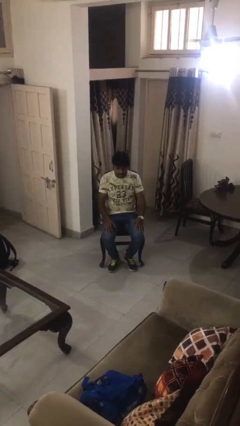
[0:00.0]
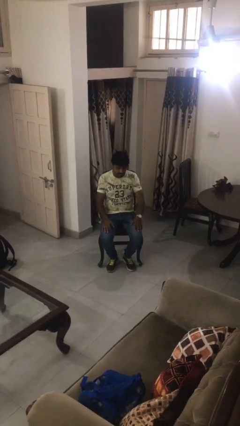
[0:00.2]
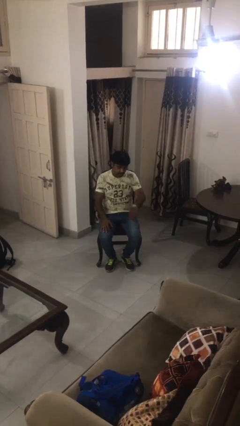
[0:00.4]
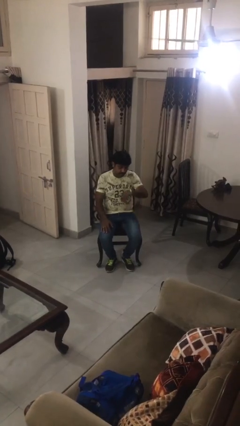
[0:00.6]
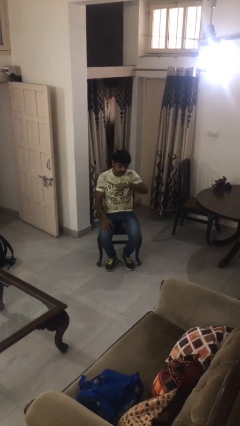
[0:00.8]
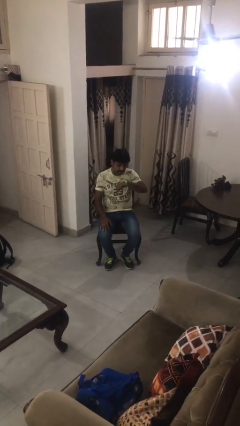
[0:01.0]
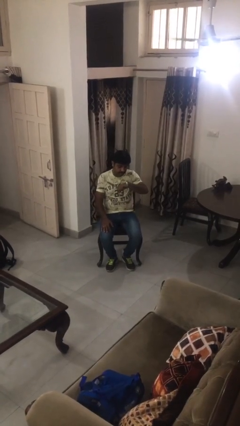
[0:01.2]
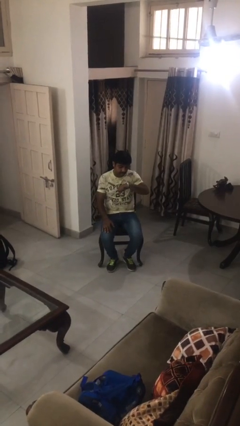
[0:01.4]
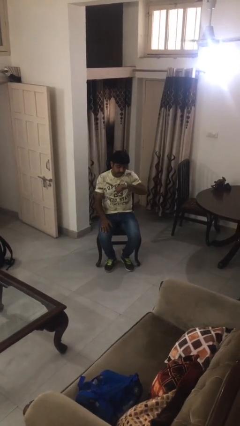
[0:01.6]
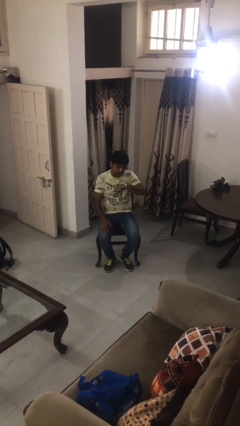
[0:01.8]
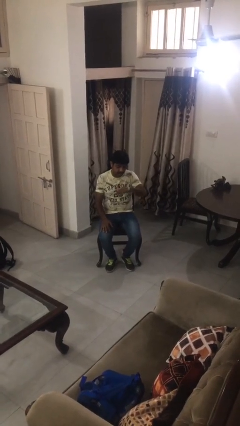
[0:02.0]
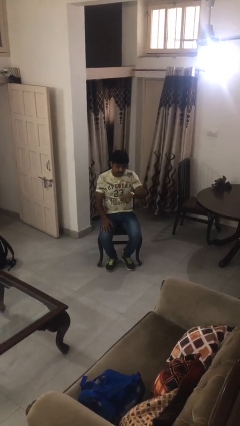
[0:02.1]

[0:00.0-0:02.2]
person looks at wristwatch

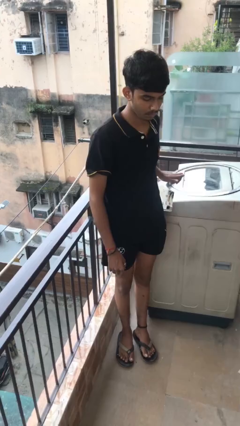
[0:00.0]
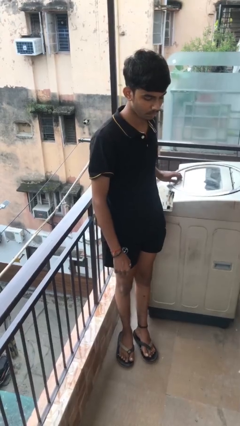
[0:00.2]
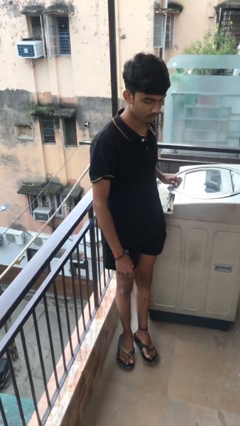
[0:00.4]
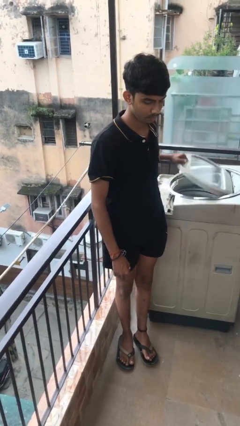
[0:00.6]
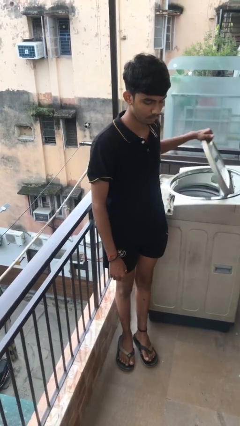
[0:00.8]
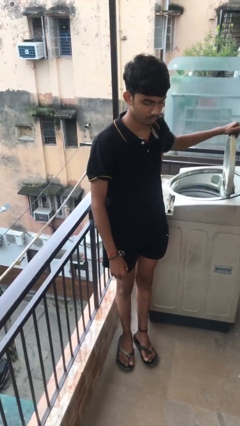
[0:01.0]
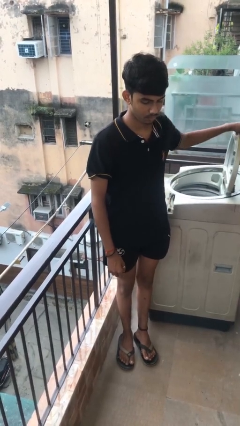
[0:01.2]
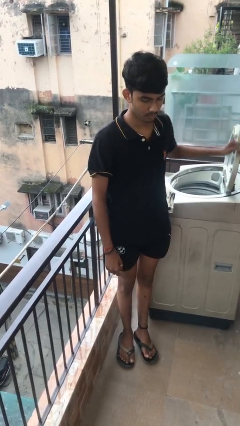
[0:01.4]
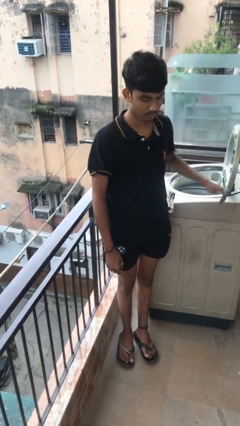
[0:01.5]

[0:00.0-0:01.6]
person opens clothes washer

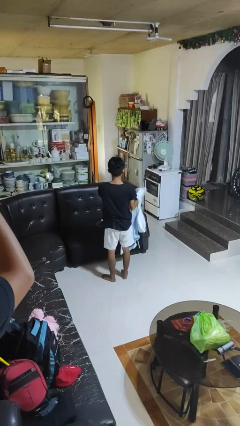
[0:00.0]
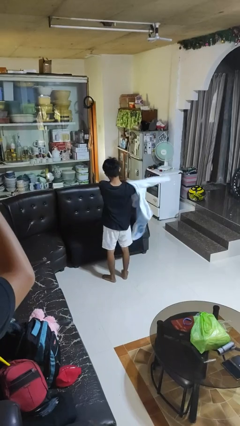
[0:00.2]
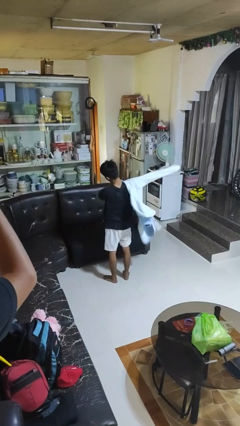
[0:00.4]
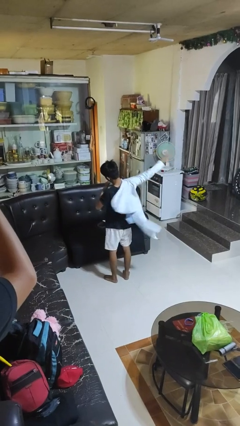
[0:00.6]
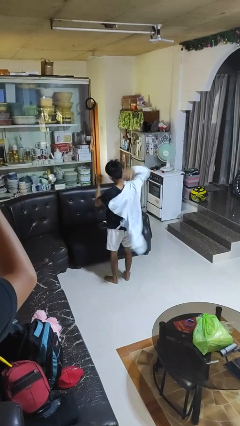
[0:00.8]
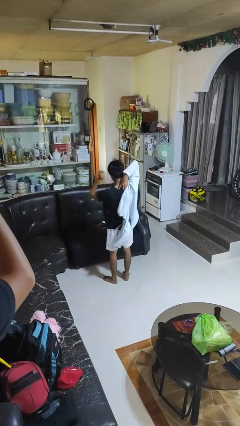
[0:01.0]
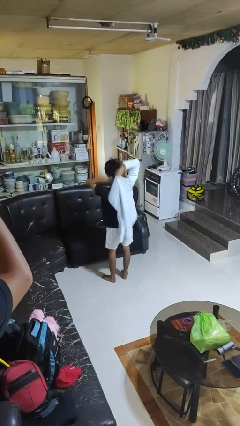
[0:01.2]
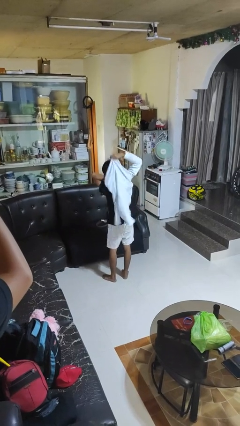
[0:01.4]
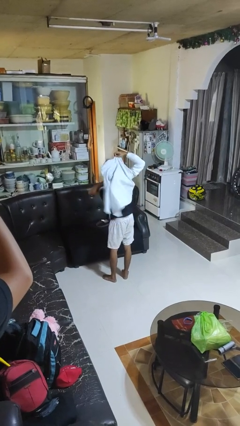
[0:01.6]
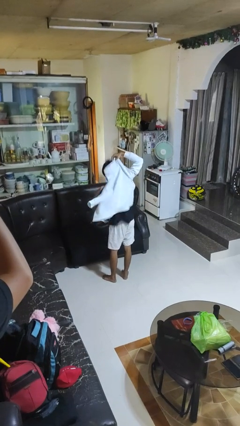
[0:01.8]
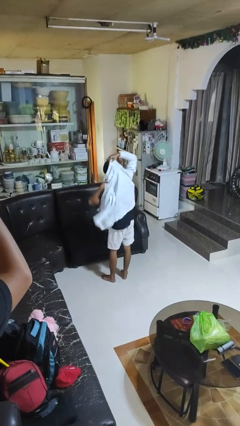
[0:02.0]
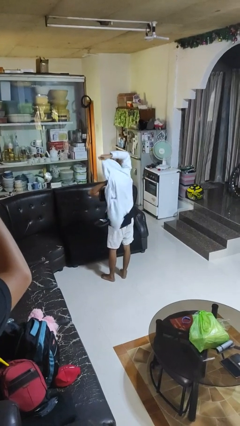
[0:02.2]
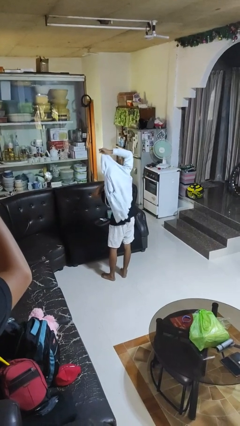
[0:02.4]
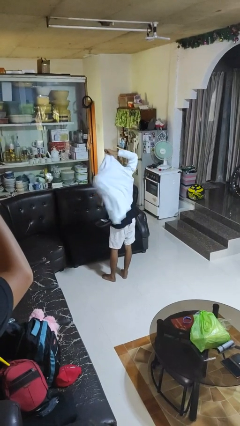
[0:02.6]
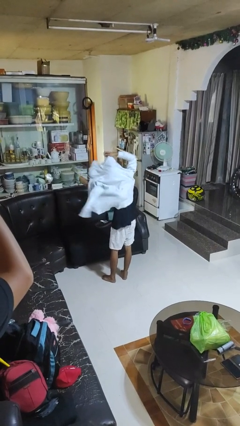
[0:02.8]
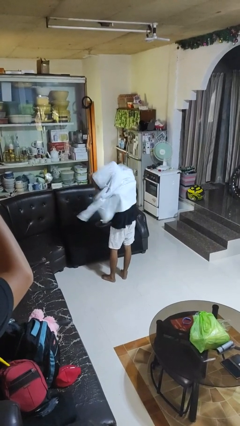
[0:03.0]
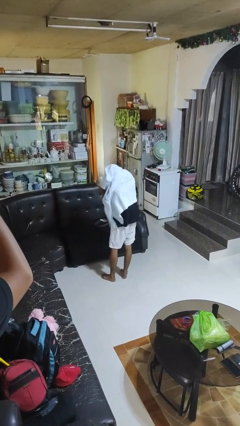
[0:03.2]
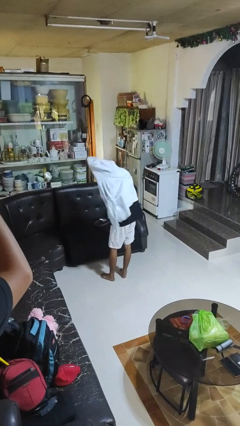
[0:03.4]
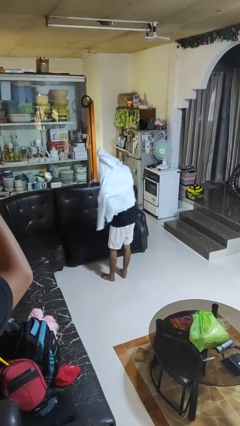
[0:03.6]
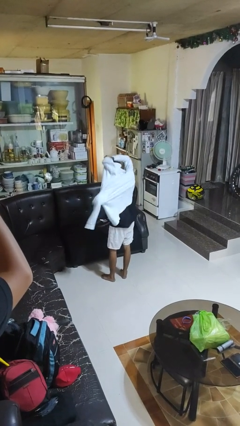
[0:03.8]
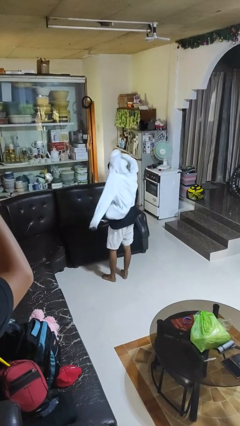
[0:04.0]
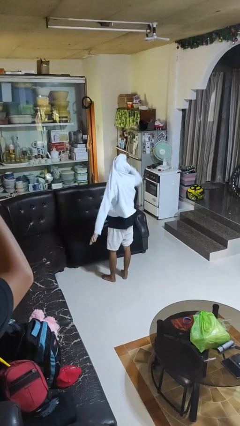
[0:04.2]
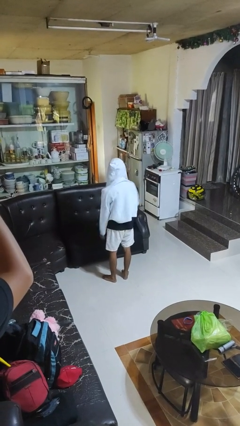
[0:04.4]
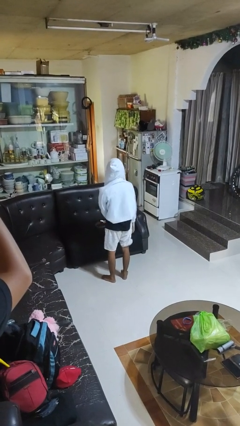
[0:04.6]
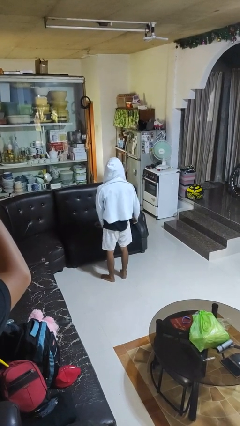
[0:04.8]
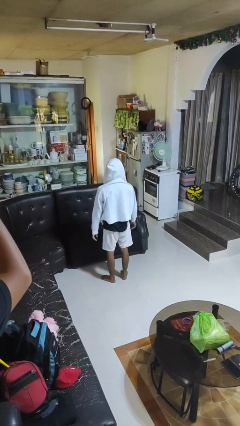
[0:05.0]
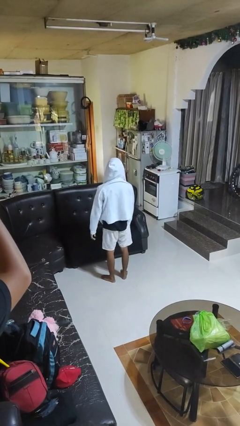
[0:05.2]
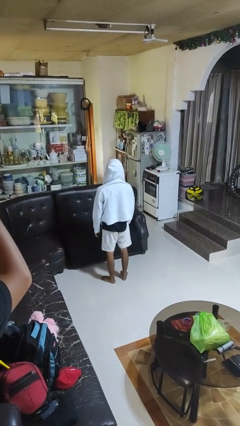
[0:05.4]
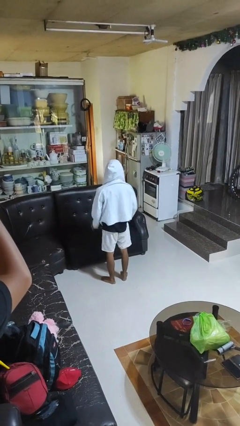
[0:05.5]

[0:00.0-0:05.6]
person puts on hoodie

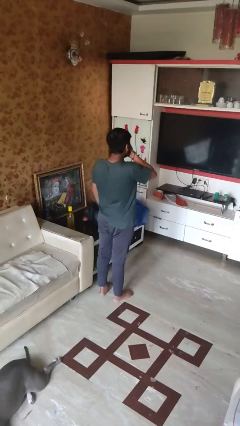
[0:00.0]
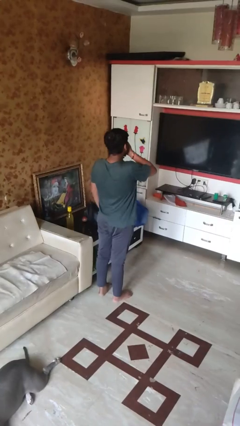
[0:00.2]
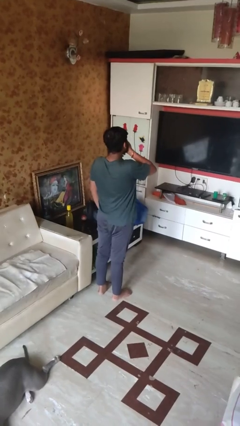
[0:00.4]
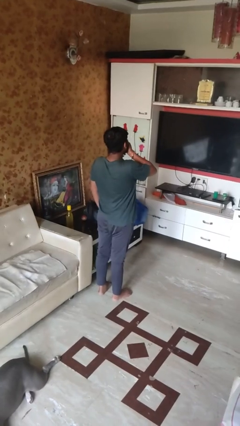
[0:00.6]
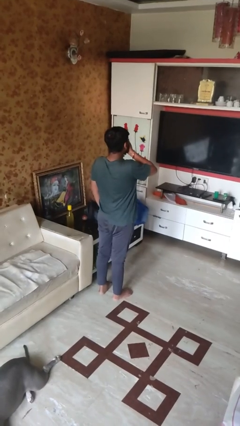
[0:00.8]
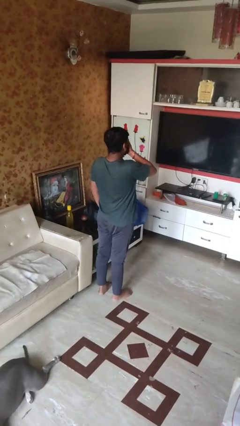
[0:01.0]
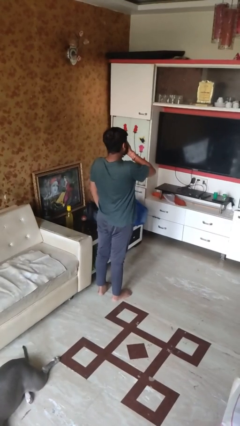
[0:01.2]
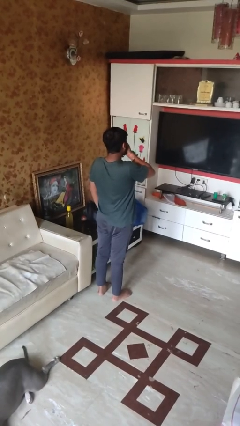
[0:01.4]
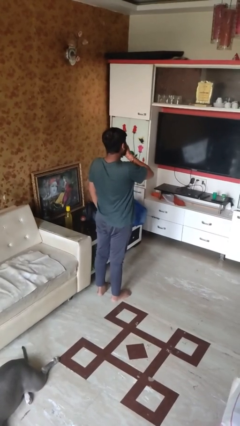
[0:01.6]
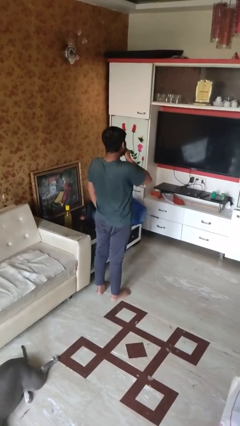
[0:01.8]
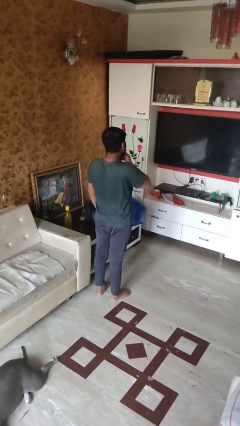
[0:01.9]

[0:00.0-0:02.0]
person yawns

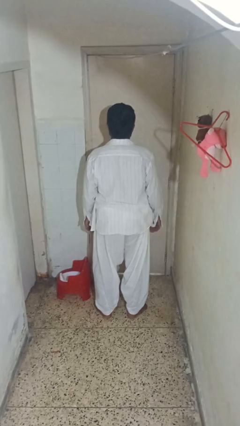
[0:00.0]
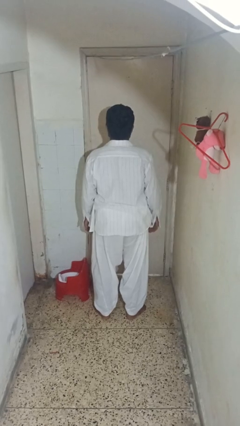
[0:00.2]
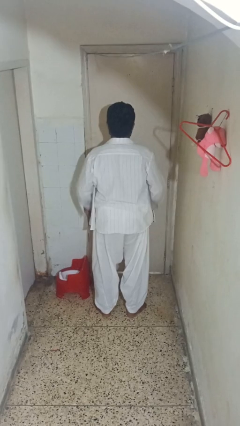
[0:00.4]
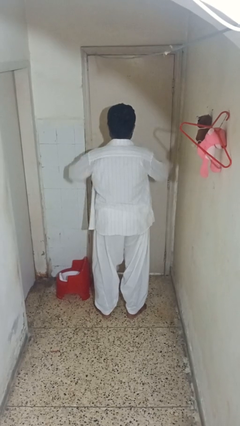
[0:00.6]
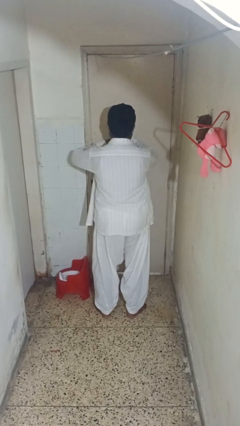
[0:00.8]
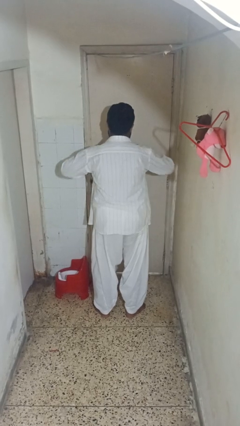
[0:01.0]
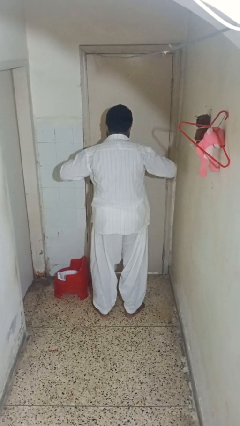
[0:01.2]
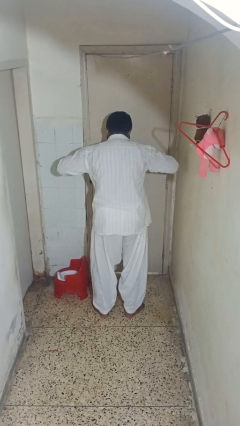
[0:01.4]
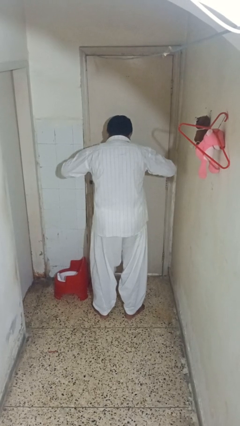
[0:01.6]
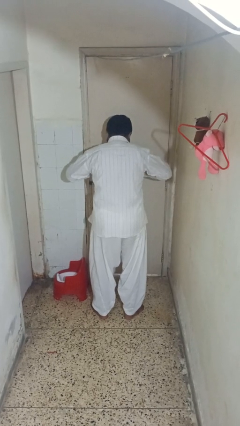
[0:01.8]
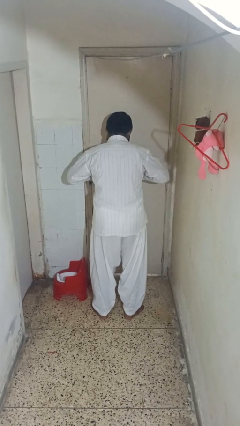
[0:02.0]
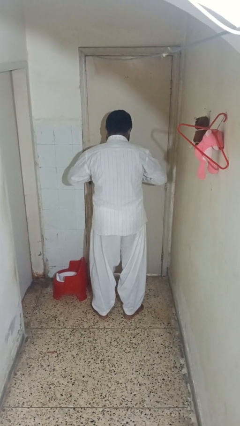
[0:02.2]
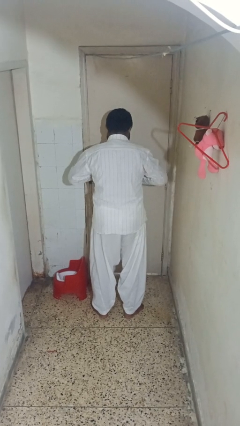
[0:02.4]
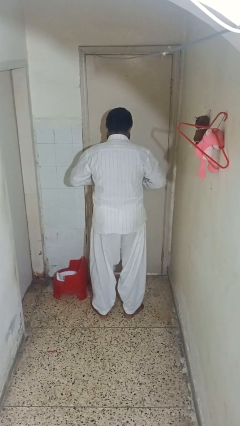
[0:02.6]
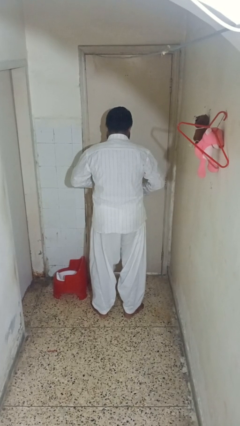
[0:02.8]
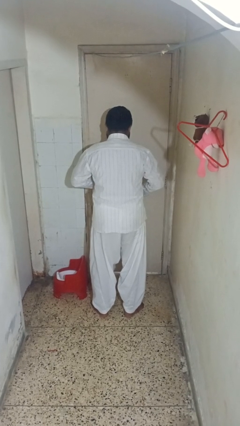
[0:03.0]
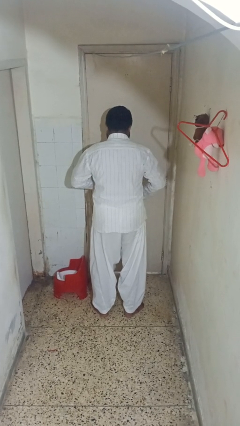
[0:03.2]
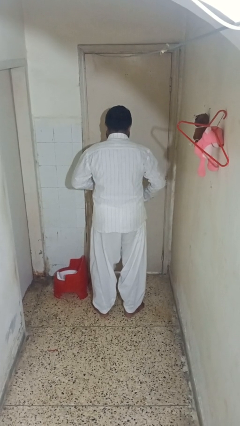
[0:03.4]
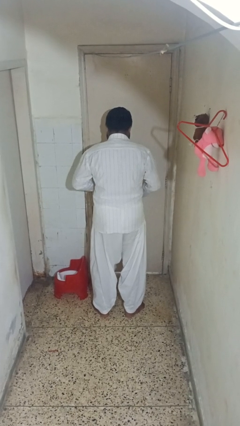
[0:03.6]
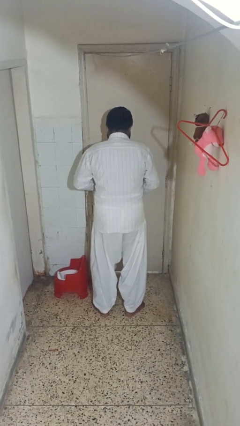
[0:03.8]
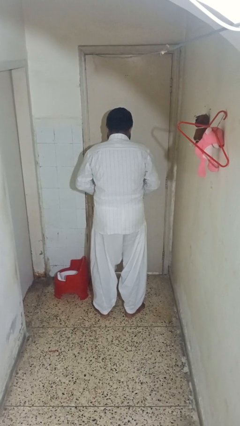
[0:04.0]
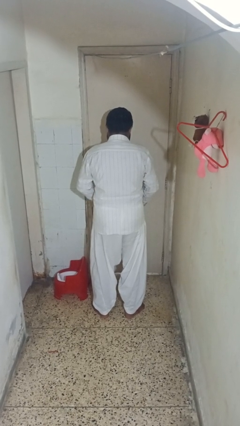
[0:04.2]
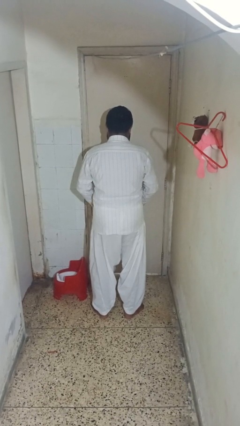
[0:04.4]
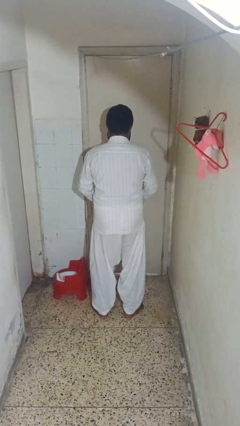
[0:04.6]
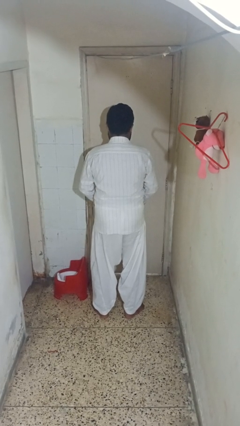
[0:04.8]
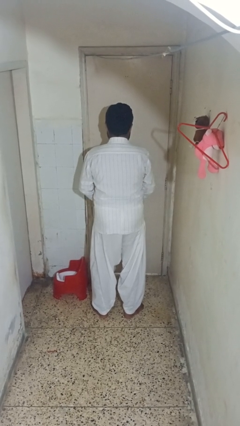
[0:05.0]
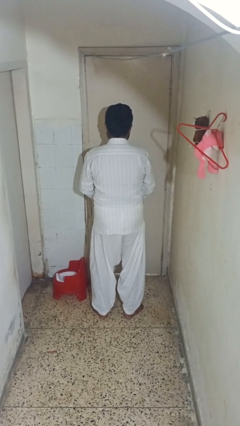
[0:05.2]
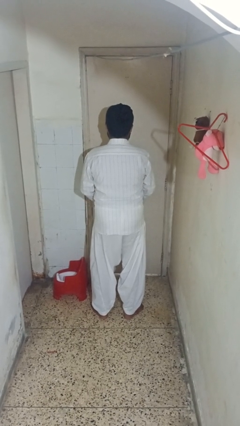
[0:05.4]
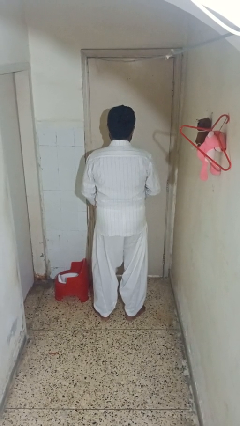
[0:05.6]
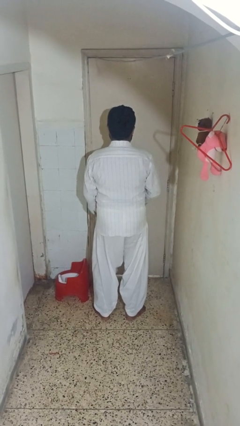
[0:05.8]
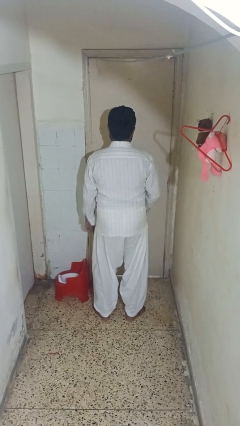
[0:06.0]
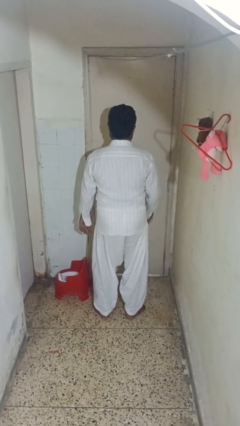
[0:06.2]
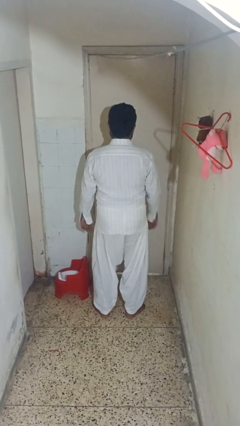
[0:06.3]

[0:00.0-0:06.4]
person buttons shirt
